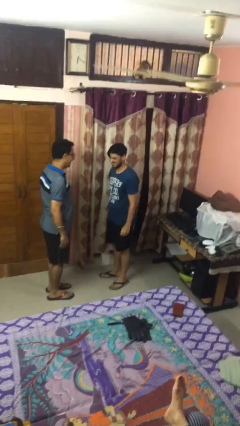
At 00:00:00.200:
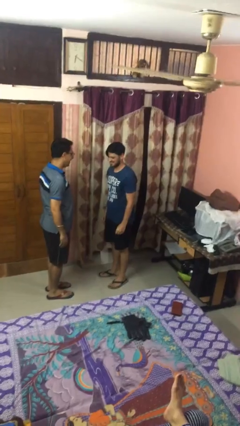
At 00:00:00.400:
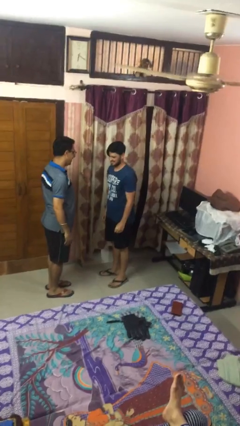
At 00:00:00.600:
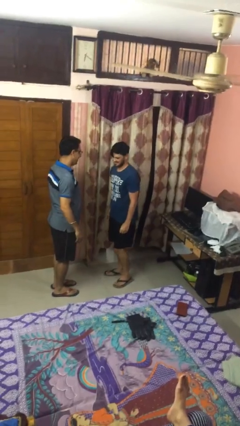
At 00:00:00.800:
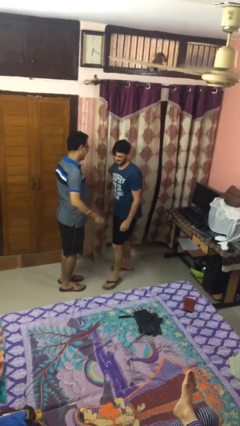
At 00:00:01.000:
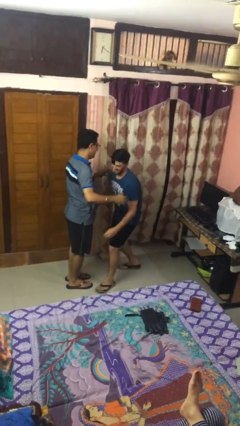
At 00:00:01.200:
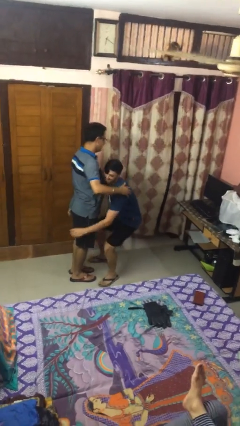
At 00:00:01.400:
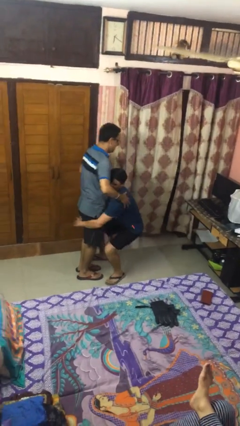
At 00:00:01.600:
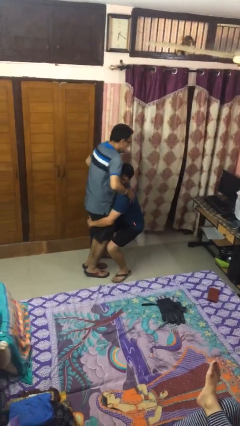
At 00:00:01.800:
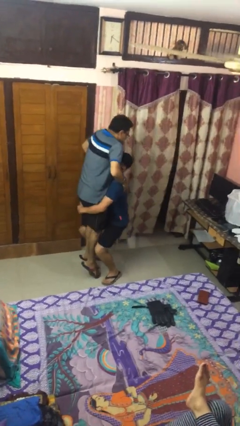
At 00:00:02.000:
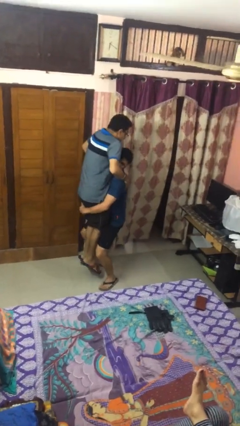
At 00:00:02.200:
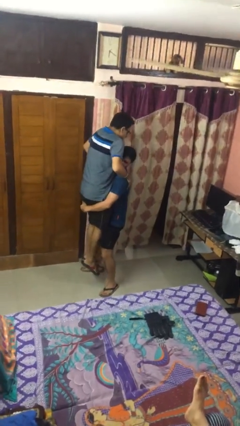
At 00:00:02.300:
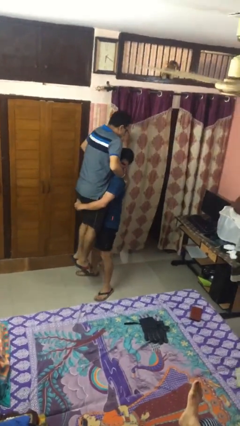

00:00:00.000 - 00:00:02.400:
person picks up person

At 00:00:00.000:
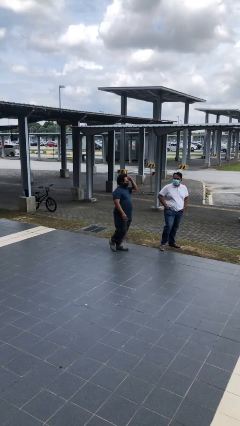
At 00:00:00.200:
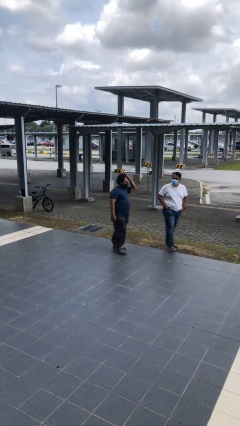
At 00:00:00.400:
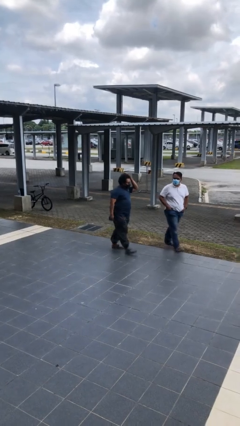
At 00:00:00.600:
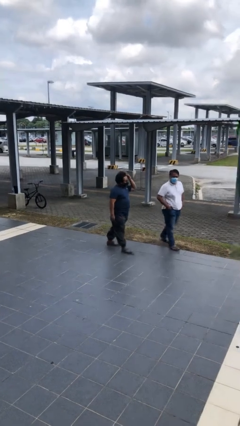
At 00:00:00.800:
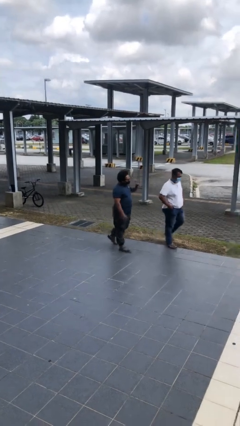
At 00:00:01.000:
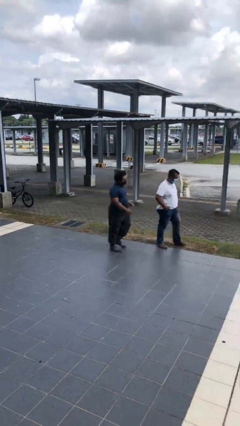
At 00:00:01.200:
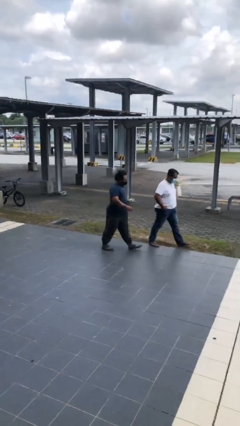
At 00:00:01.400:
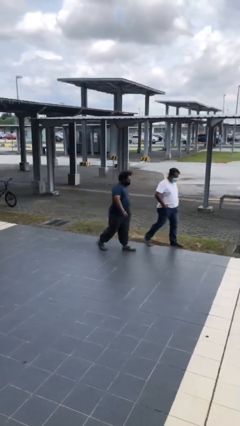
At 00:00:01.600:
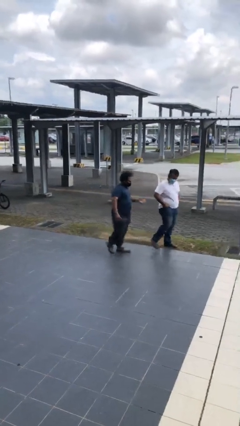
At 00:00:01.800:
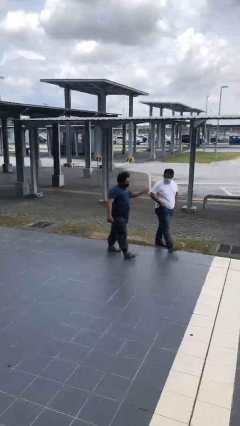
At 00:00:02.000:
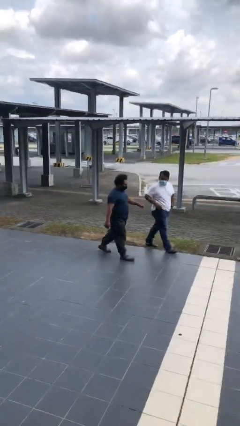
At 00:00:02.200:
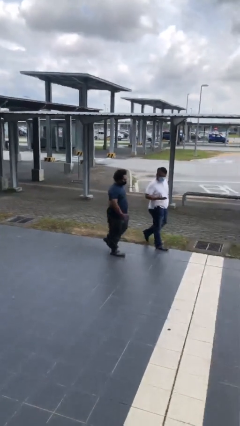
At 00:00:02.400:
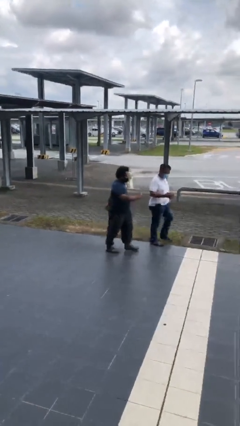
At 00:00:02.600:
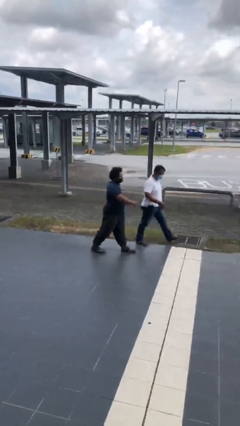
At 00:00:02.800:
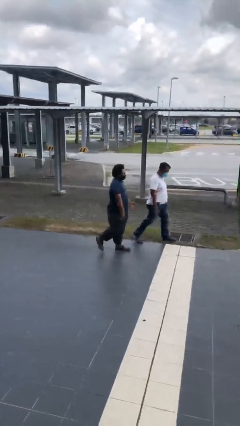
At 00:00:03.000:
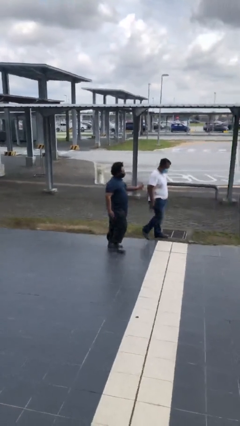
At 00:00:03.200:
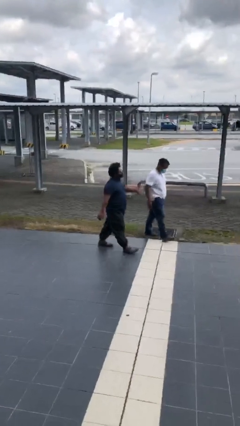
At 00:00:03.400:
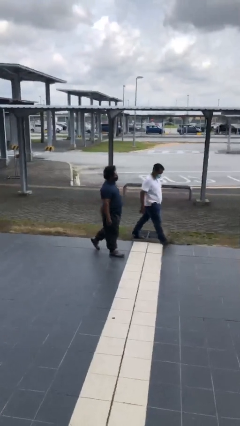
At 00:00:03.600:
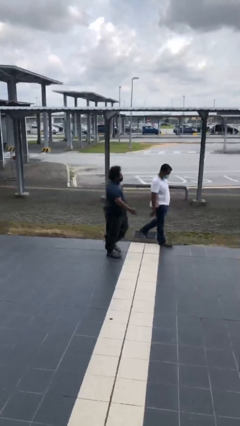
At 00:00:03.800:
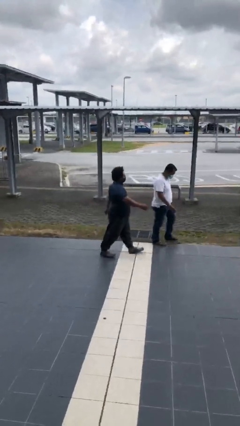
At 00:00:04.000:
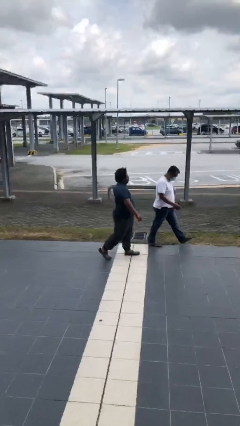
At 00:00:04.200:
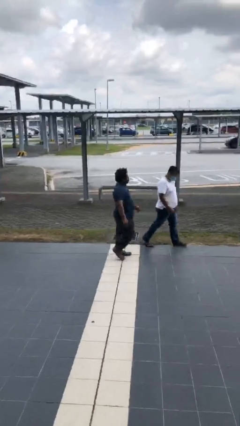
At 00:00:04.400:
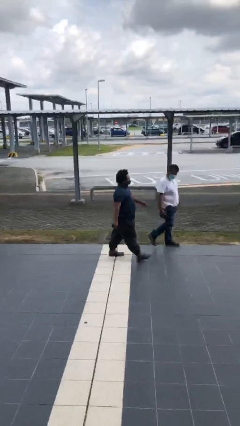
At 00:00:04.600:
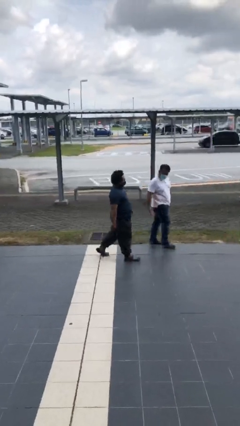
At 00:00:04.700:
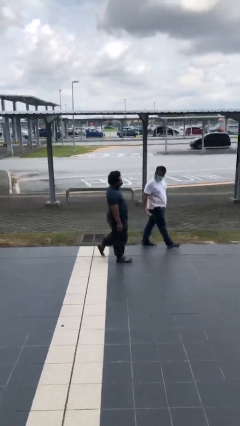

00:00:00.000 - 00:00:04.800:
person talks to person

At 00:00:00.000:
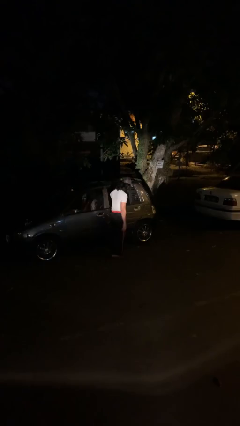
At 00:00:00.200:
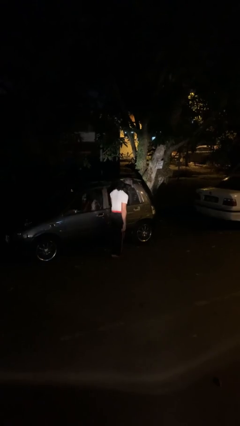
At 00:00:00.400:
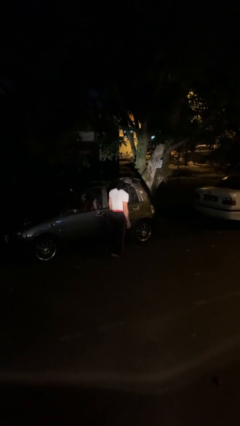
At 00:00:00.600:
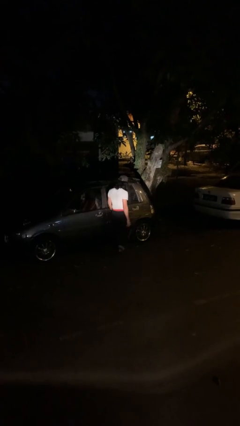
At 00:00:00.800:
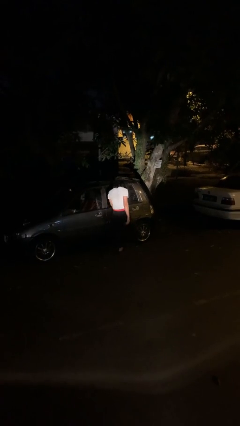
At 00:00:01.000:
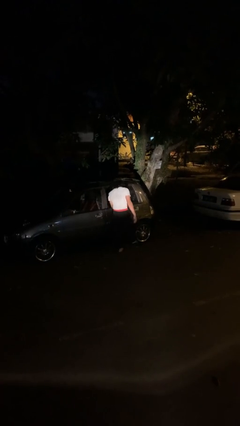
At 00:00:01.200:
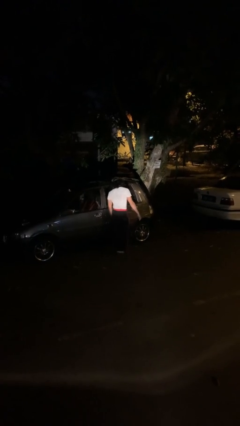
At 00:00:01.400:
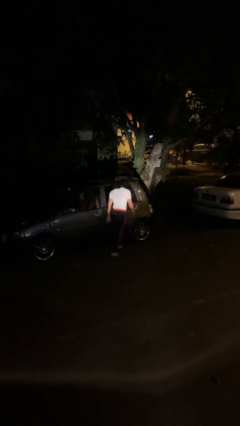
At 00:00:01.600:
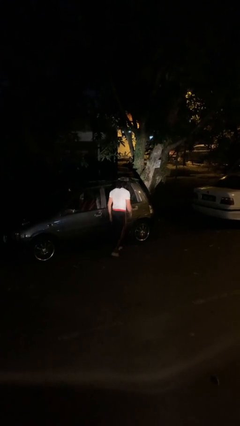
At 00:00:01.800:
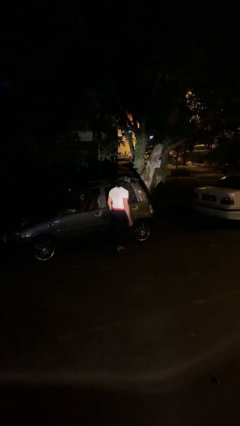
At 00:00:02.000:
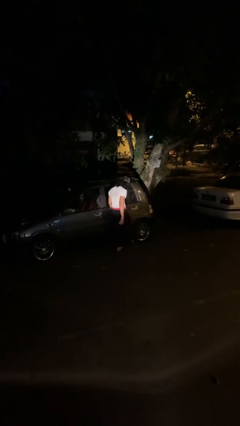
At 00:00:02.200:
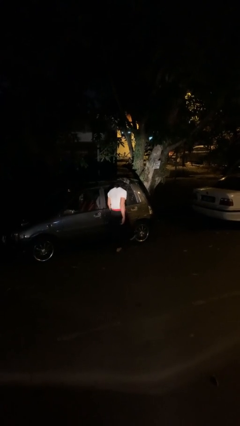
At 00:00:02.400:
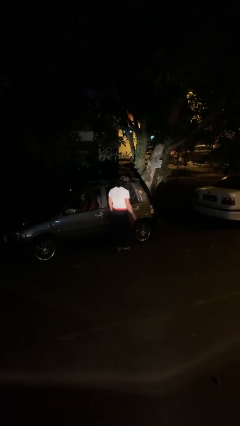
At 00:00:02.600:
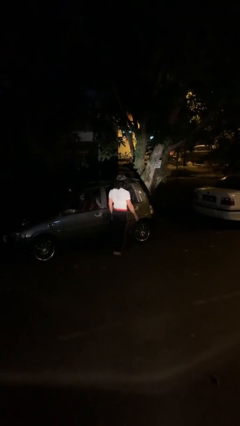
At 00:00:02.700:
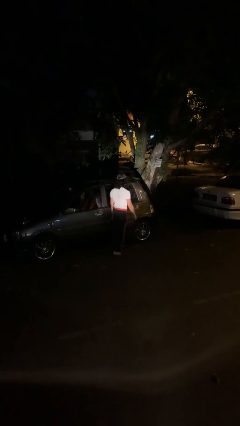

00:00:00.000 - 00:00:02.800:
person kicks car tires

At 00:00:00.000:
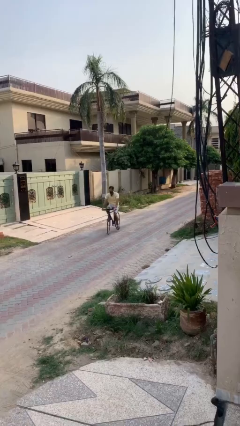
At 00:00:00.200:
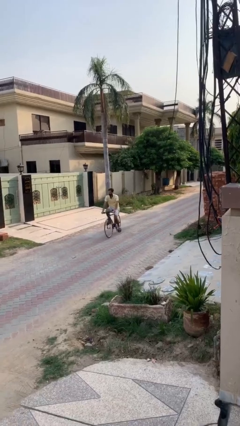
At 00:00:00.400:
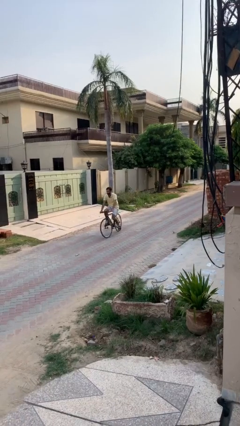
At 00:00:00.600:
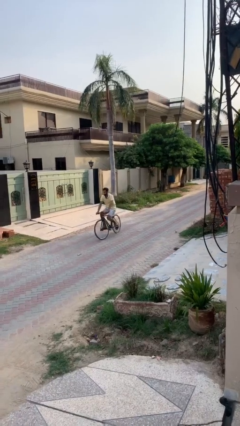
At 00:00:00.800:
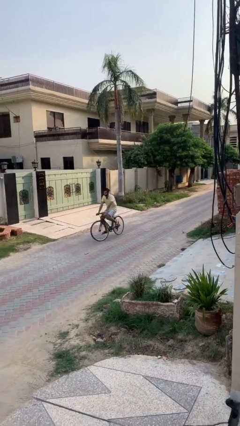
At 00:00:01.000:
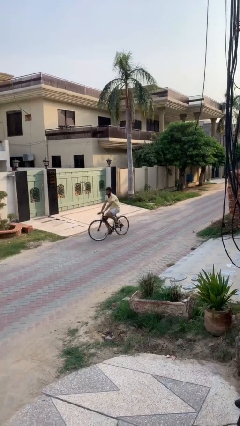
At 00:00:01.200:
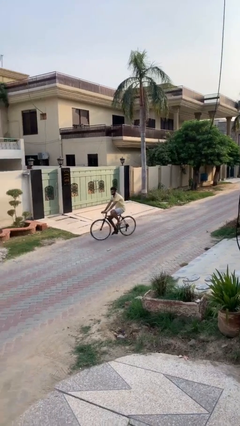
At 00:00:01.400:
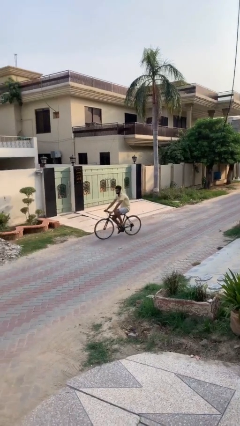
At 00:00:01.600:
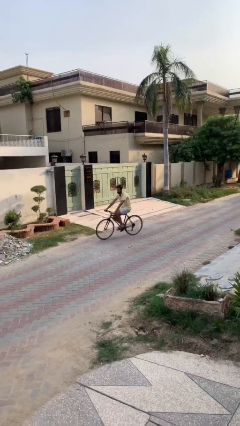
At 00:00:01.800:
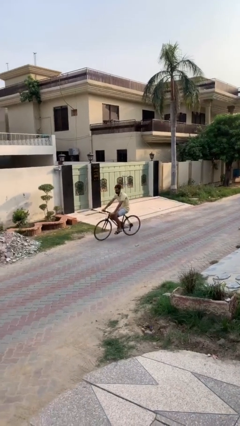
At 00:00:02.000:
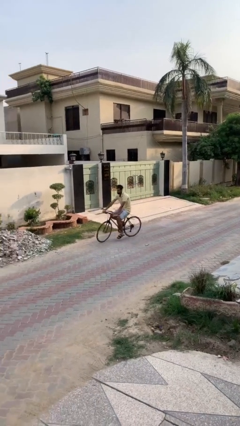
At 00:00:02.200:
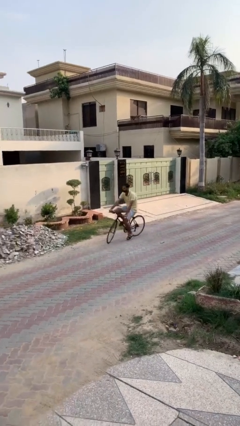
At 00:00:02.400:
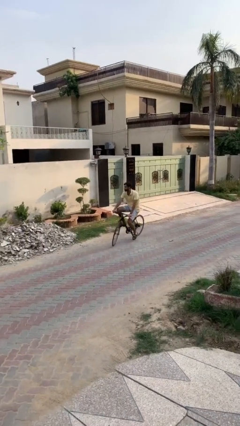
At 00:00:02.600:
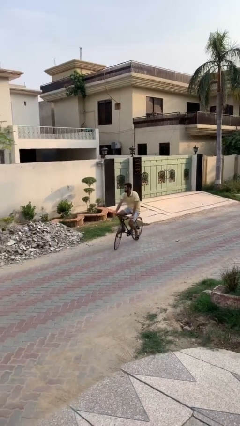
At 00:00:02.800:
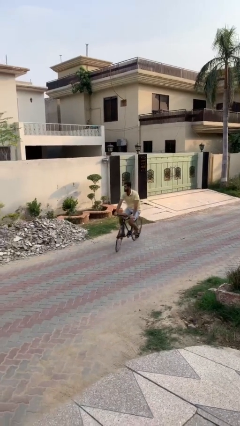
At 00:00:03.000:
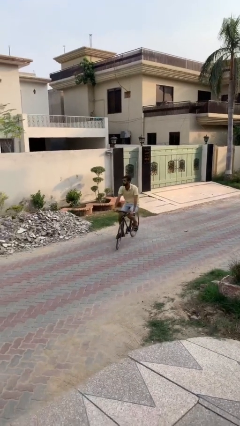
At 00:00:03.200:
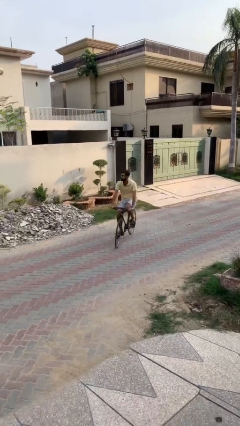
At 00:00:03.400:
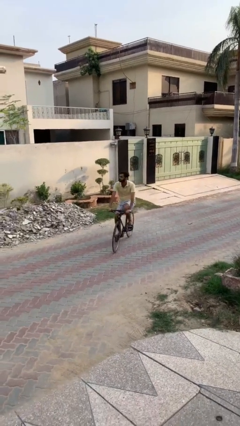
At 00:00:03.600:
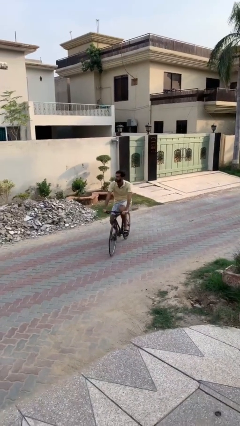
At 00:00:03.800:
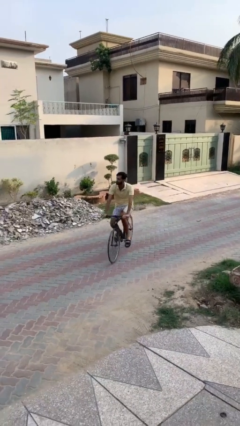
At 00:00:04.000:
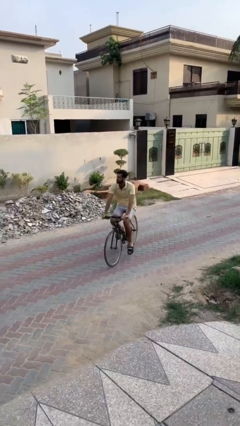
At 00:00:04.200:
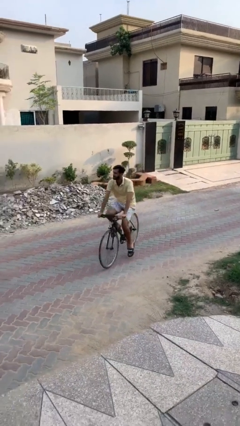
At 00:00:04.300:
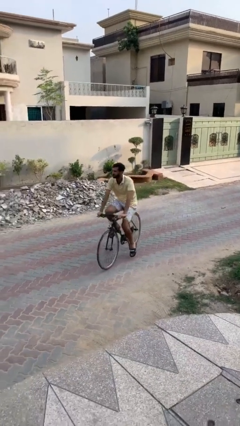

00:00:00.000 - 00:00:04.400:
person rides bicycle

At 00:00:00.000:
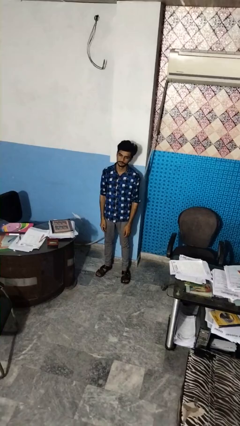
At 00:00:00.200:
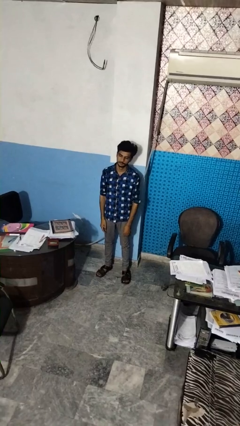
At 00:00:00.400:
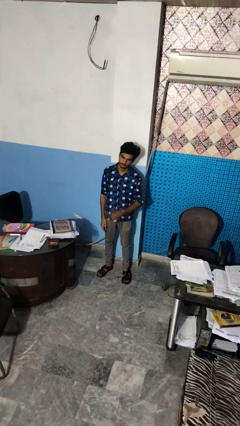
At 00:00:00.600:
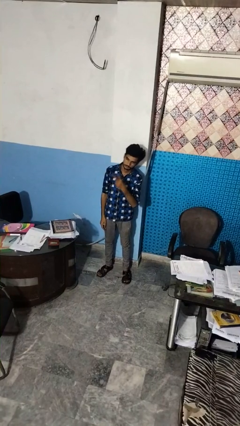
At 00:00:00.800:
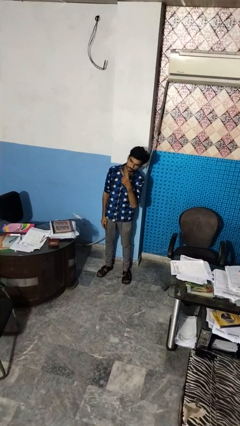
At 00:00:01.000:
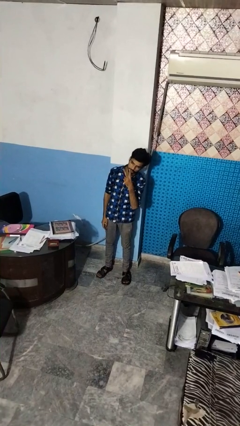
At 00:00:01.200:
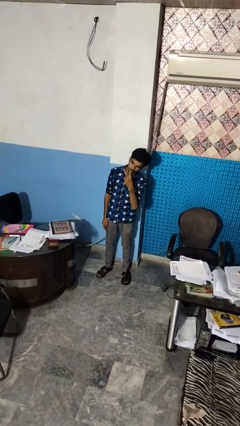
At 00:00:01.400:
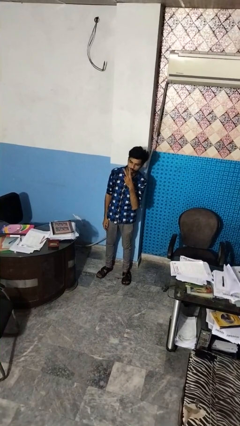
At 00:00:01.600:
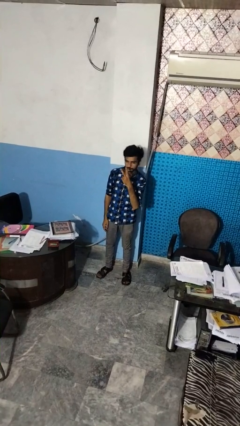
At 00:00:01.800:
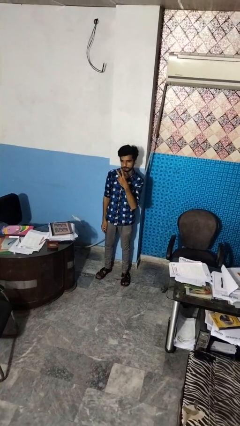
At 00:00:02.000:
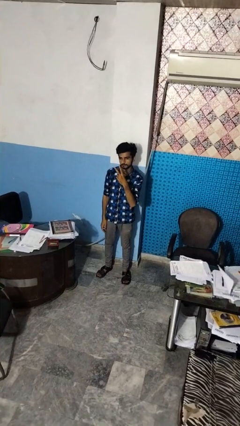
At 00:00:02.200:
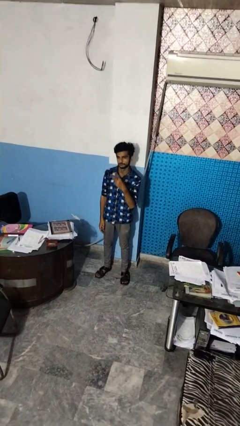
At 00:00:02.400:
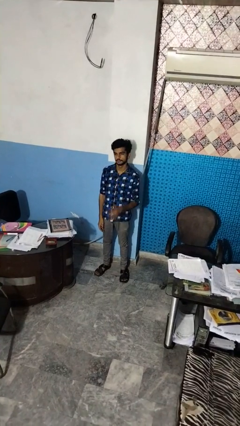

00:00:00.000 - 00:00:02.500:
person gestures peace

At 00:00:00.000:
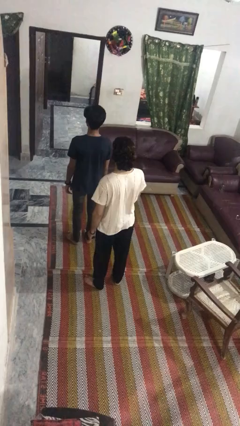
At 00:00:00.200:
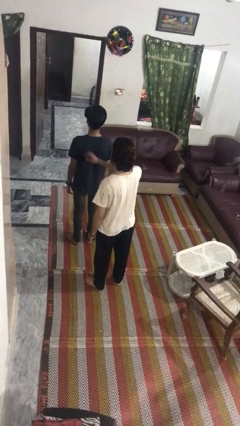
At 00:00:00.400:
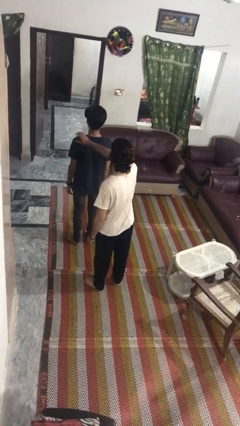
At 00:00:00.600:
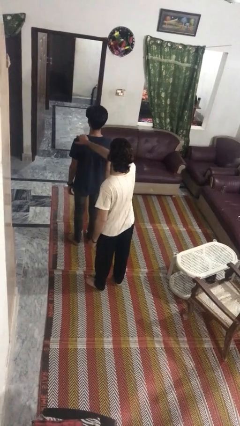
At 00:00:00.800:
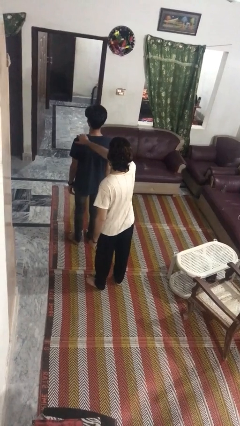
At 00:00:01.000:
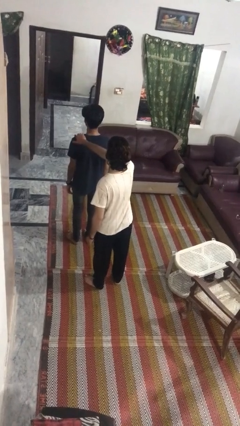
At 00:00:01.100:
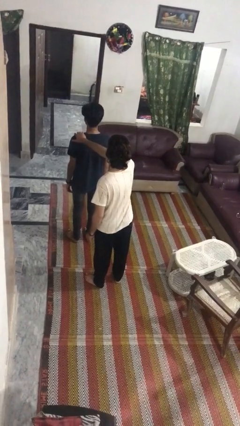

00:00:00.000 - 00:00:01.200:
person grabs person by shoulder
